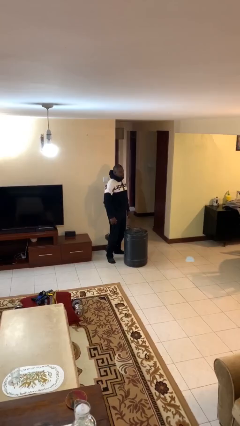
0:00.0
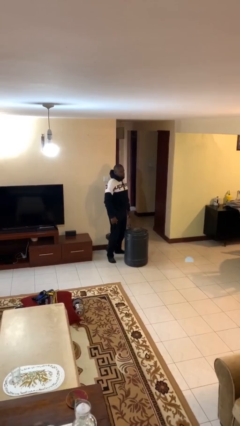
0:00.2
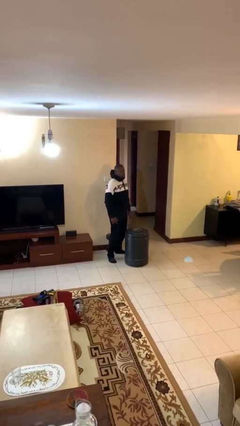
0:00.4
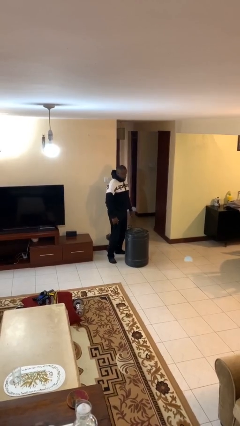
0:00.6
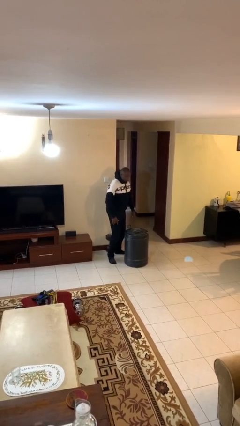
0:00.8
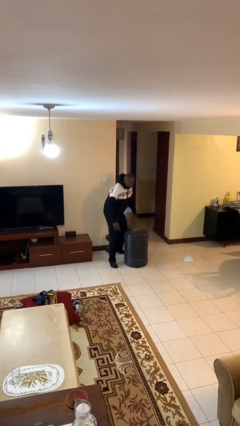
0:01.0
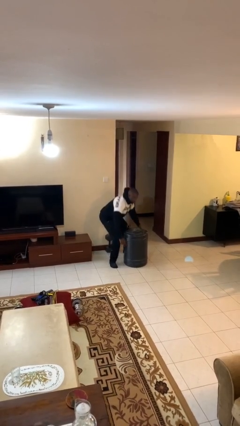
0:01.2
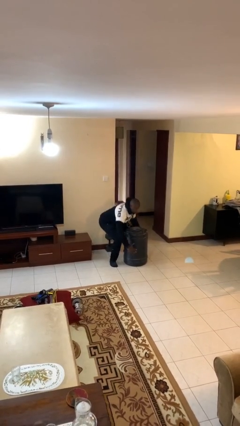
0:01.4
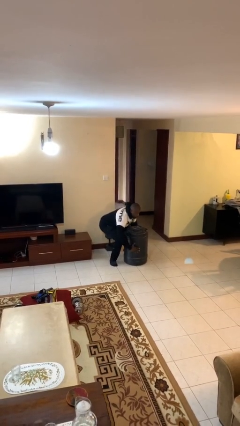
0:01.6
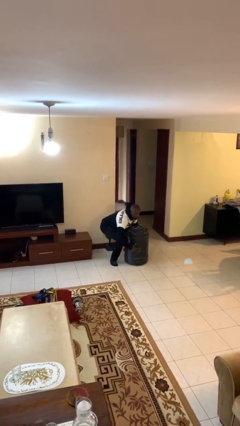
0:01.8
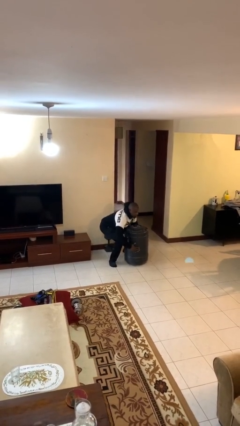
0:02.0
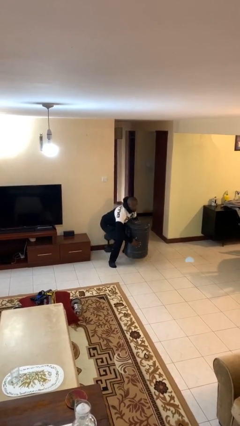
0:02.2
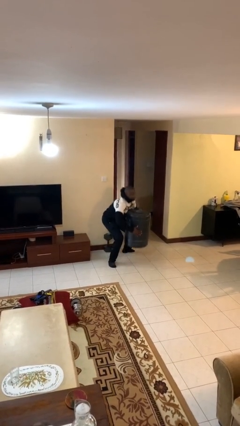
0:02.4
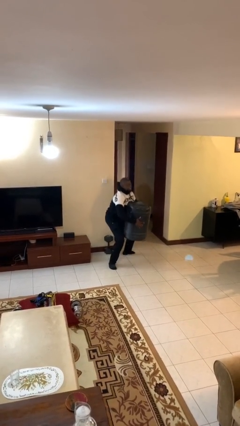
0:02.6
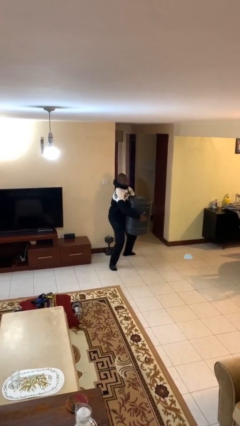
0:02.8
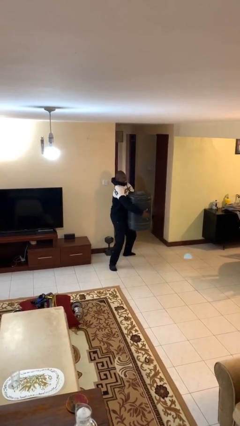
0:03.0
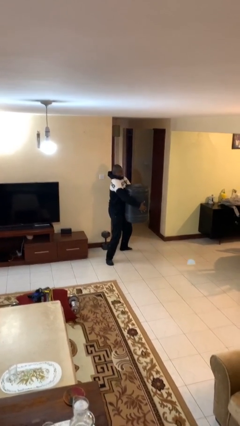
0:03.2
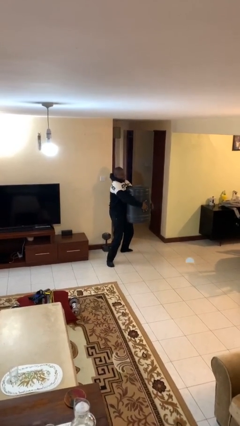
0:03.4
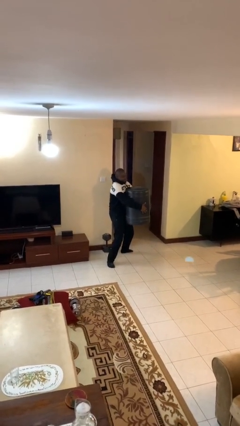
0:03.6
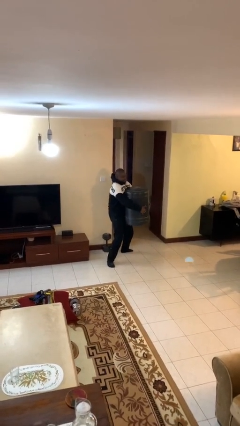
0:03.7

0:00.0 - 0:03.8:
person picks up object from floor

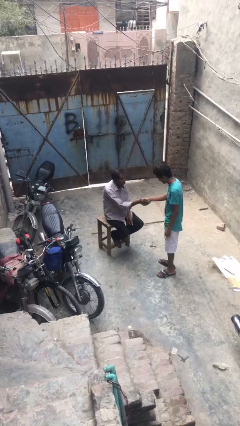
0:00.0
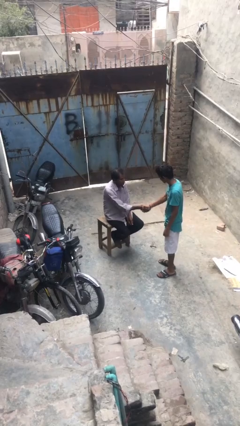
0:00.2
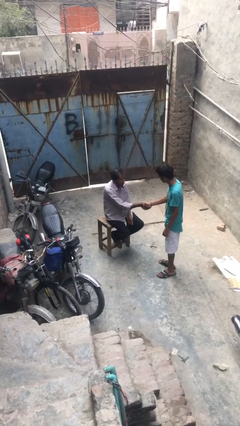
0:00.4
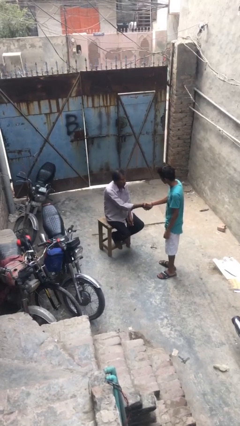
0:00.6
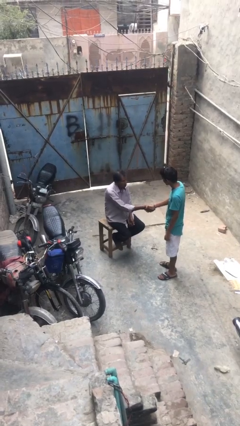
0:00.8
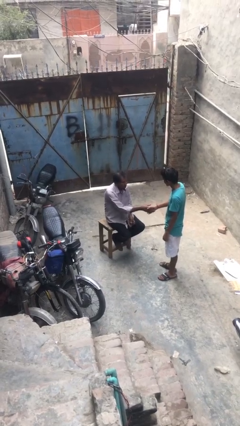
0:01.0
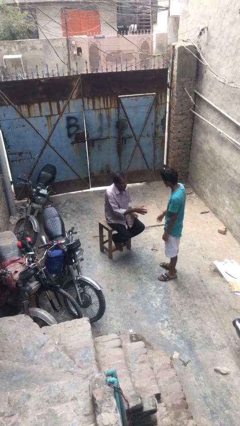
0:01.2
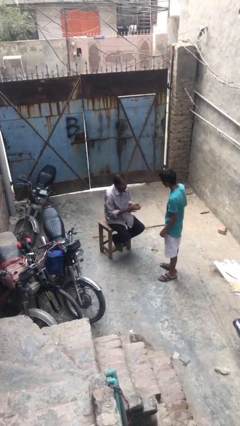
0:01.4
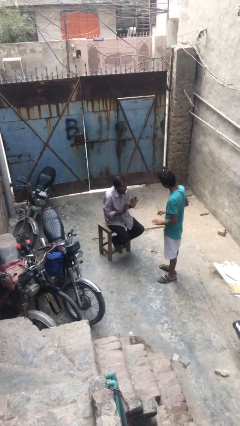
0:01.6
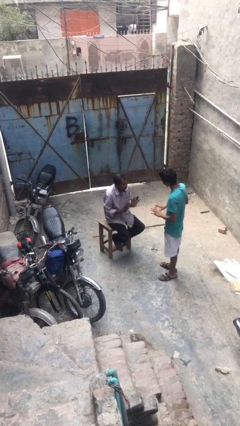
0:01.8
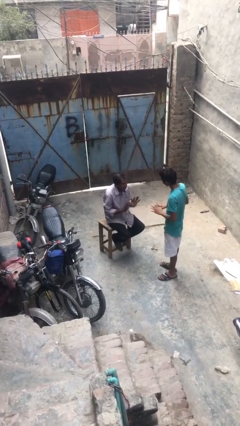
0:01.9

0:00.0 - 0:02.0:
person shakes hand

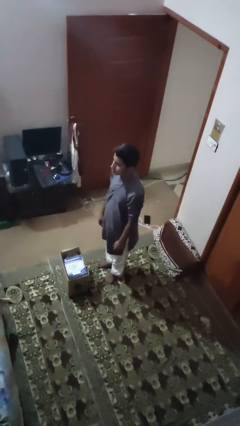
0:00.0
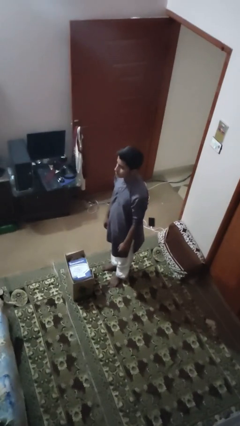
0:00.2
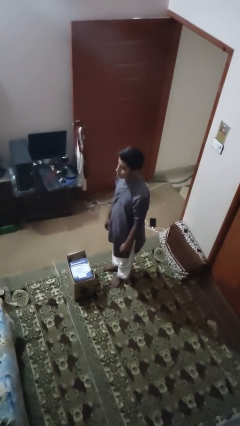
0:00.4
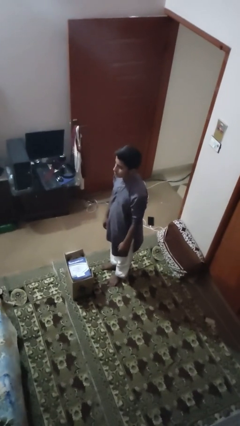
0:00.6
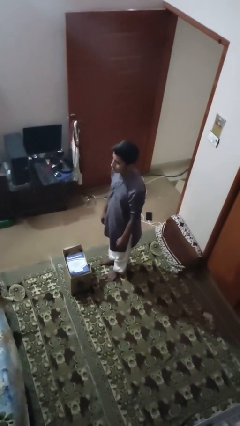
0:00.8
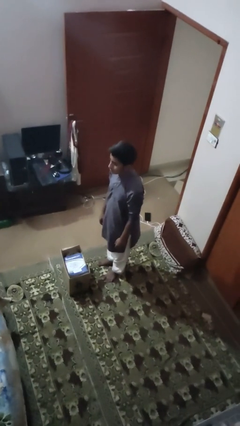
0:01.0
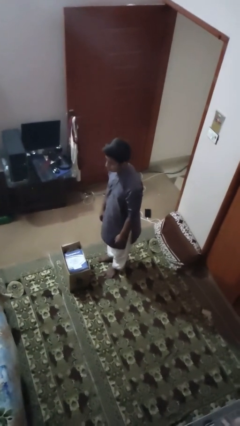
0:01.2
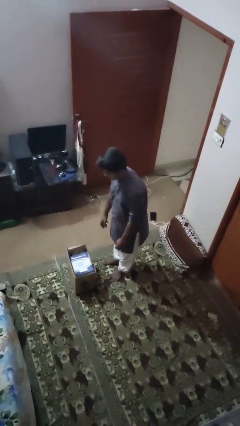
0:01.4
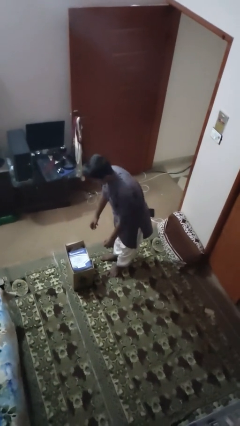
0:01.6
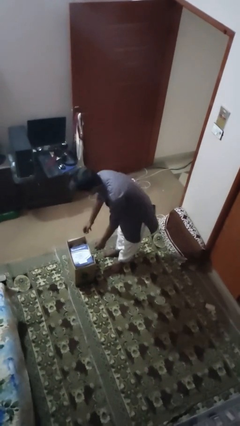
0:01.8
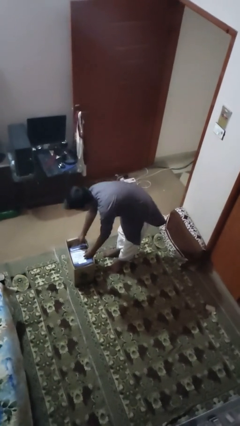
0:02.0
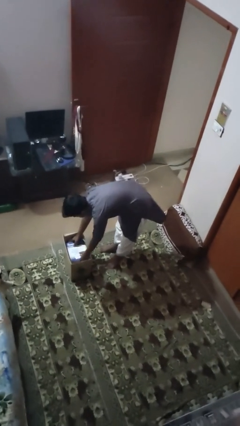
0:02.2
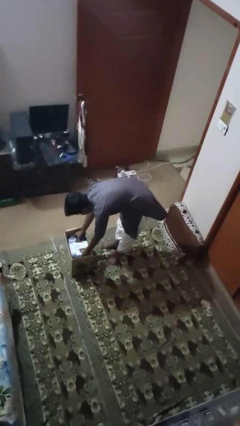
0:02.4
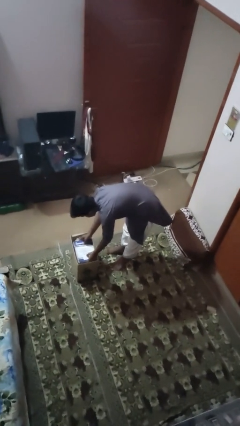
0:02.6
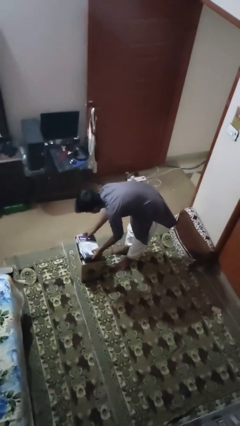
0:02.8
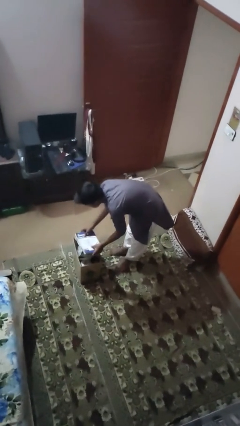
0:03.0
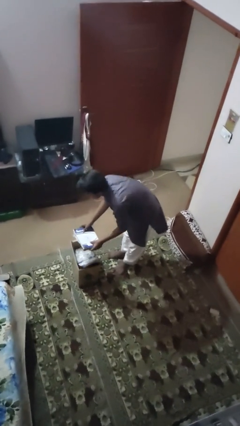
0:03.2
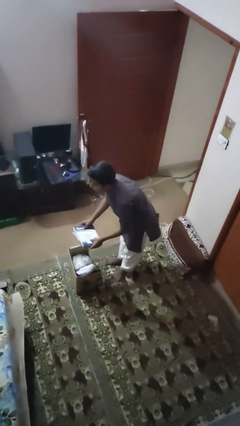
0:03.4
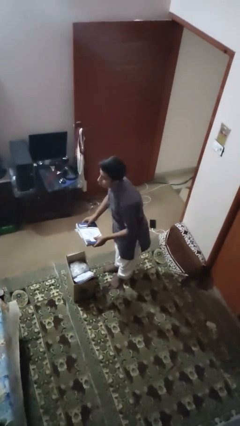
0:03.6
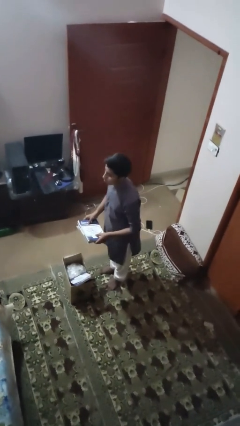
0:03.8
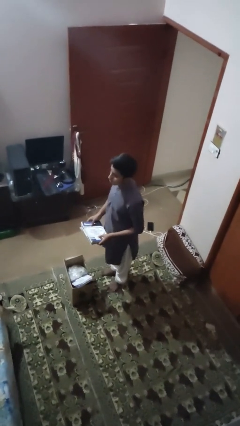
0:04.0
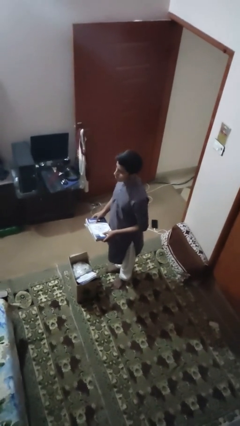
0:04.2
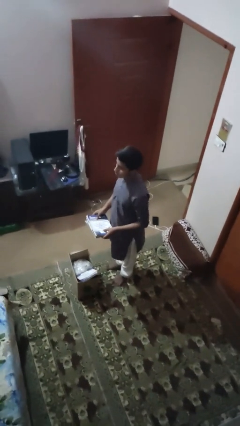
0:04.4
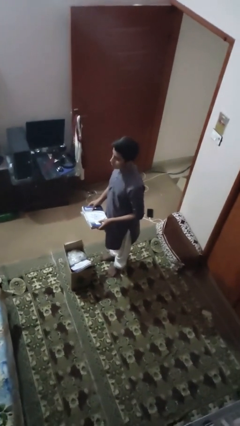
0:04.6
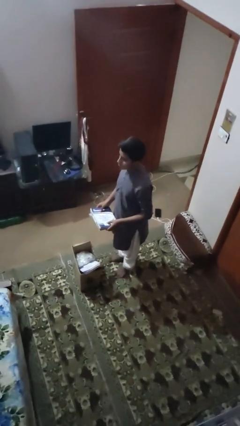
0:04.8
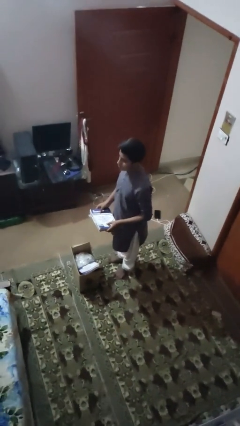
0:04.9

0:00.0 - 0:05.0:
person takes object from box

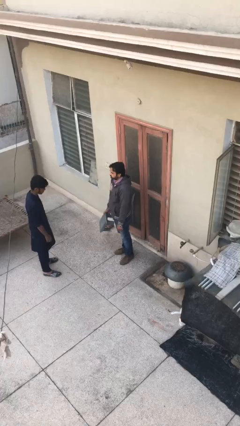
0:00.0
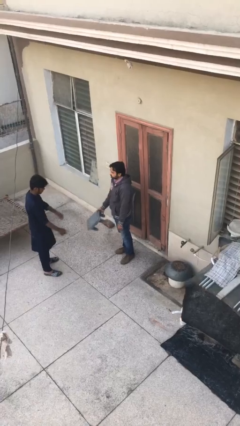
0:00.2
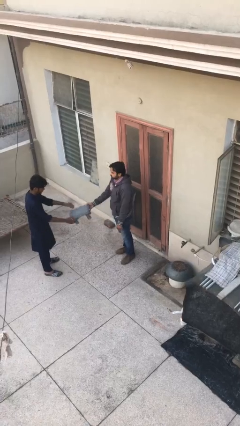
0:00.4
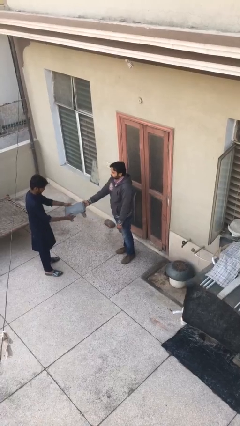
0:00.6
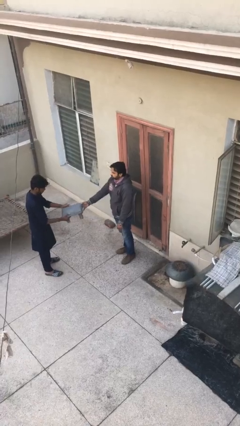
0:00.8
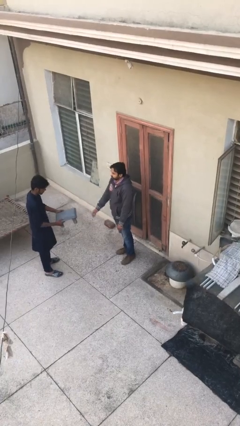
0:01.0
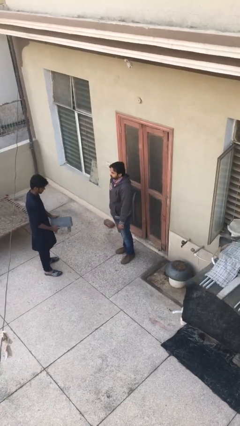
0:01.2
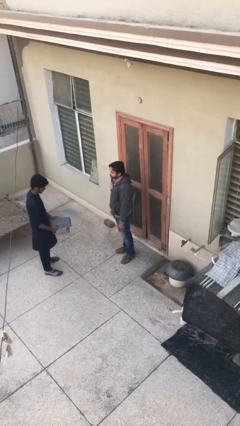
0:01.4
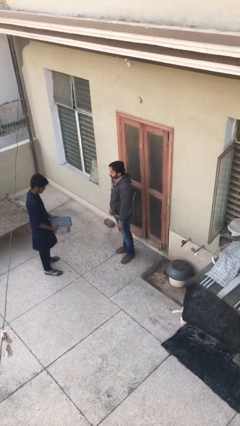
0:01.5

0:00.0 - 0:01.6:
person transfers object to person

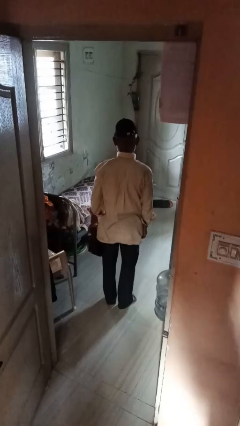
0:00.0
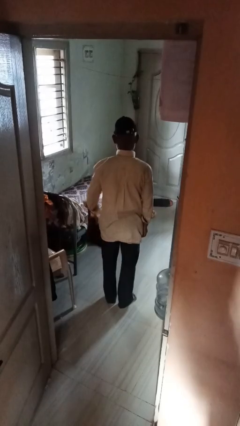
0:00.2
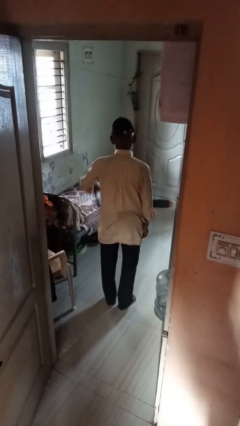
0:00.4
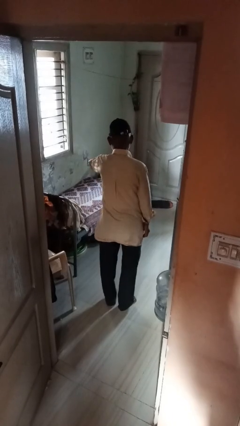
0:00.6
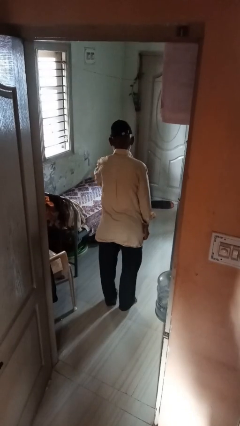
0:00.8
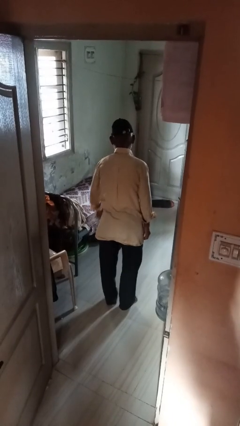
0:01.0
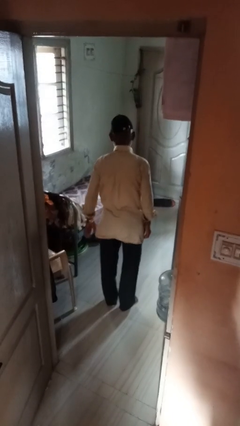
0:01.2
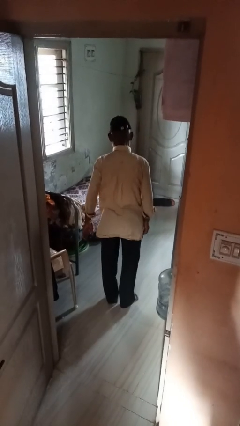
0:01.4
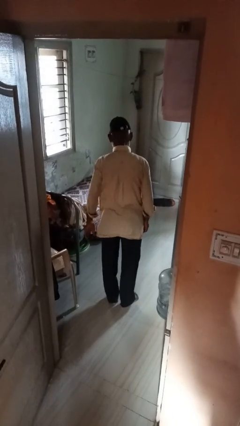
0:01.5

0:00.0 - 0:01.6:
person throws object on bed

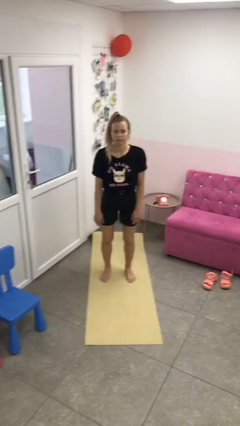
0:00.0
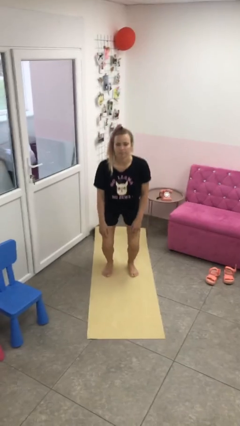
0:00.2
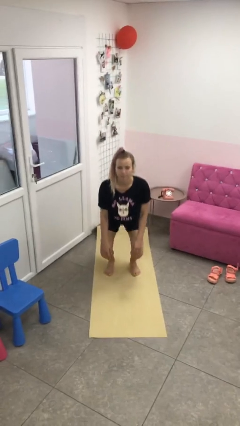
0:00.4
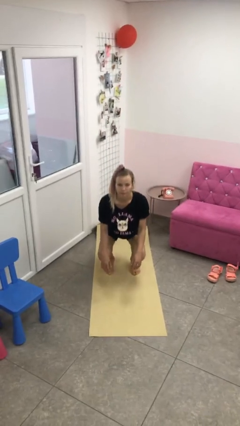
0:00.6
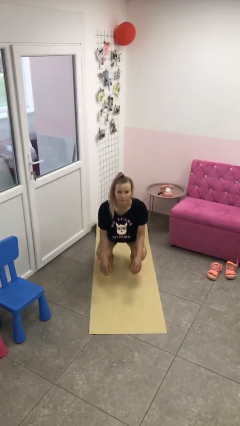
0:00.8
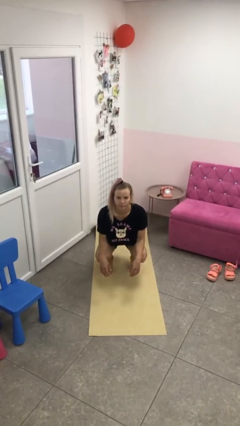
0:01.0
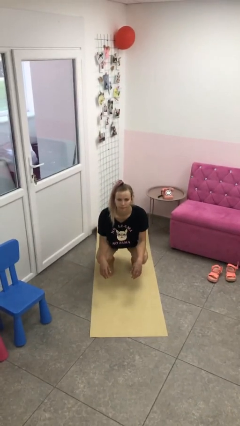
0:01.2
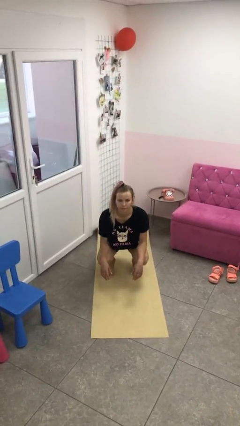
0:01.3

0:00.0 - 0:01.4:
person squats

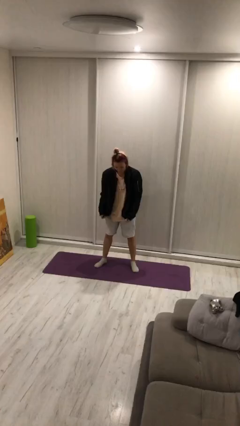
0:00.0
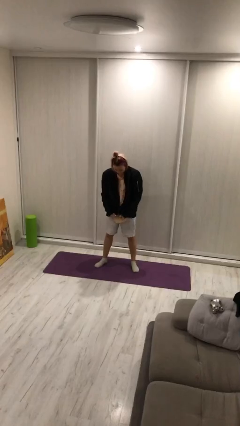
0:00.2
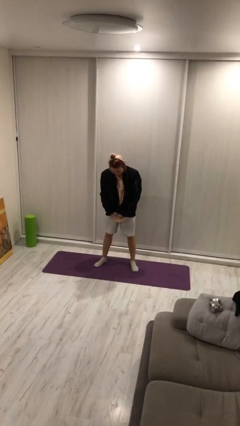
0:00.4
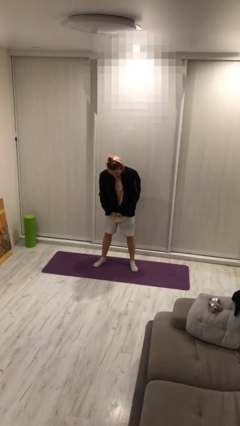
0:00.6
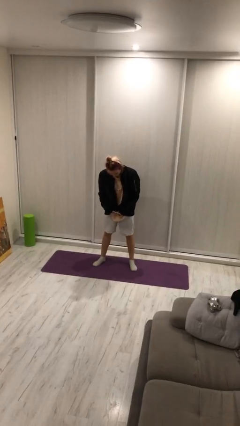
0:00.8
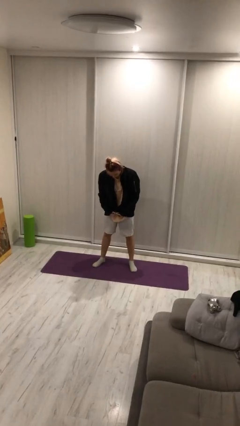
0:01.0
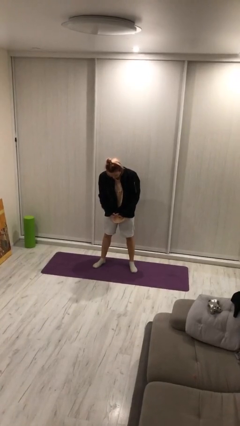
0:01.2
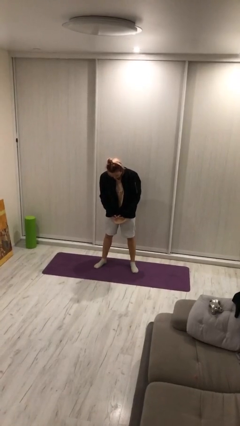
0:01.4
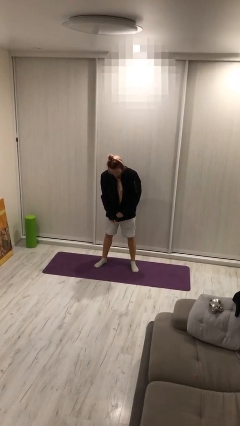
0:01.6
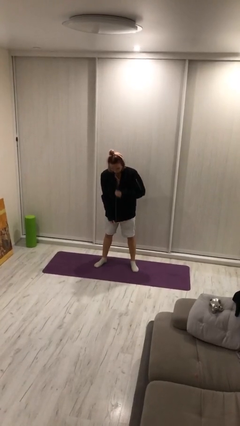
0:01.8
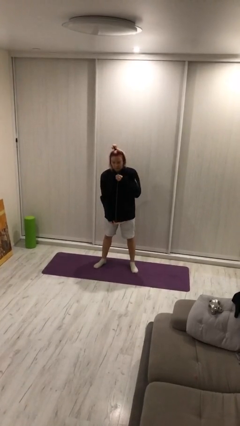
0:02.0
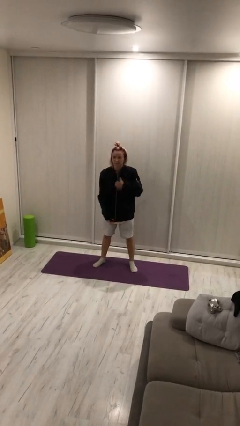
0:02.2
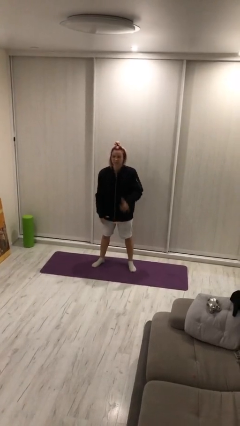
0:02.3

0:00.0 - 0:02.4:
person zips up jacket
